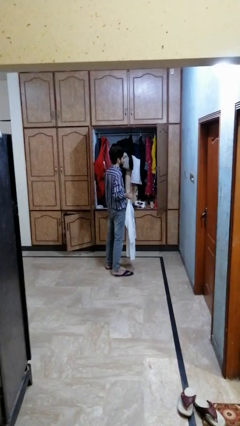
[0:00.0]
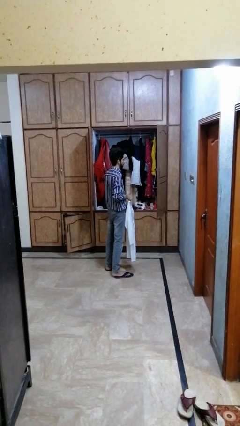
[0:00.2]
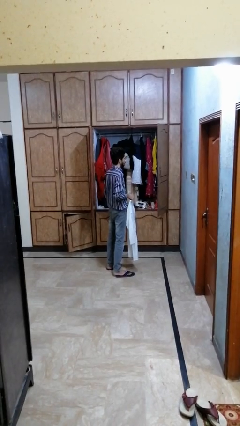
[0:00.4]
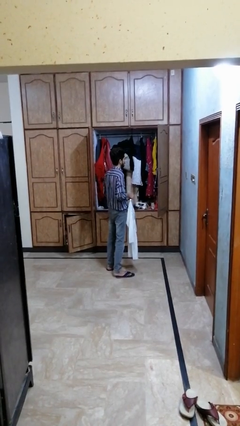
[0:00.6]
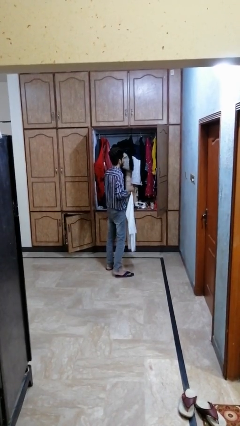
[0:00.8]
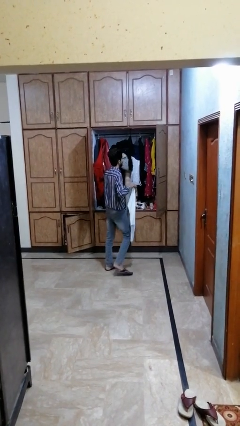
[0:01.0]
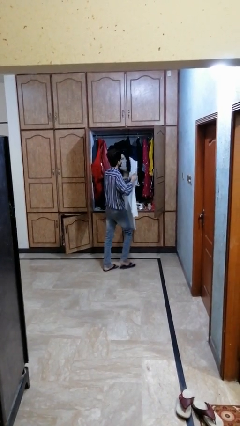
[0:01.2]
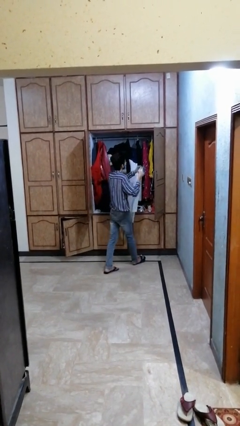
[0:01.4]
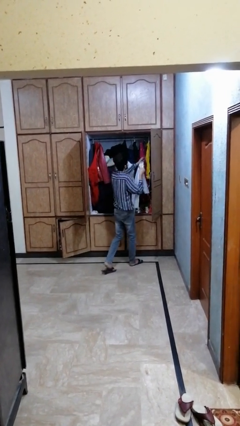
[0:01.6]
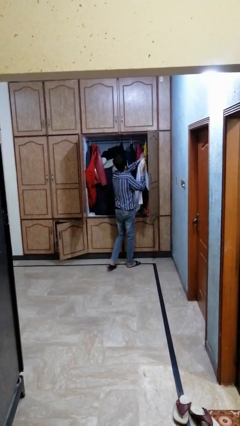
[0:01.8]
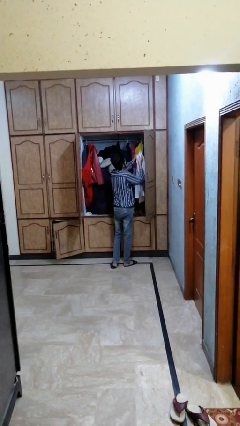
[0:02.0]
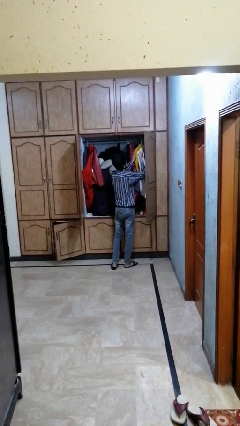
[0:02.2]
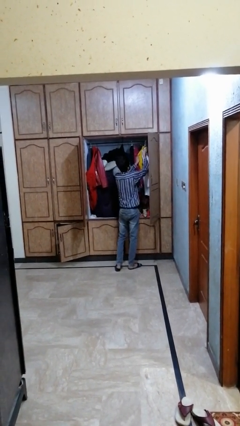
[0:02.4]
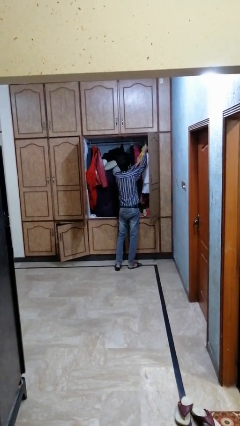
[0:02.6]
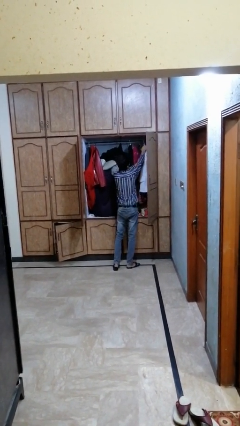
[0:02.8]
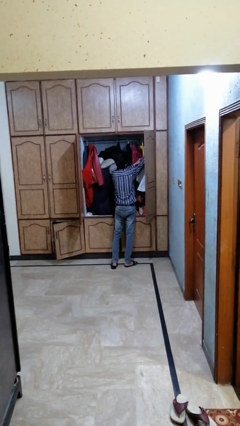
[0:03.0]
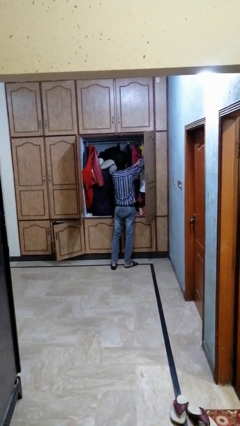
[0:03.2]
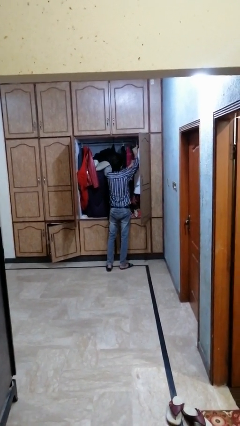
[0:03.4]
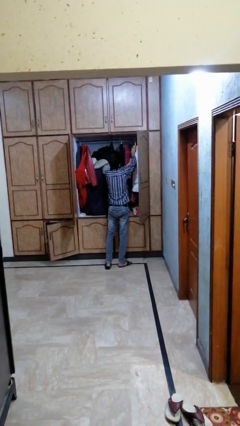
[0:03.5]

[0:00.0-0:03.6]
person puts clothes into dresser

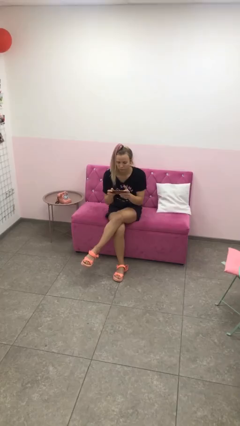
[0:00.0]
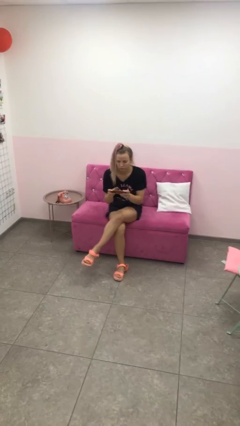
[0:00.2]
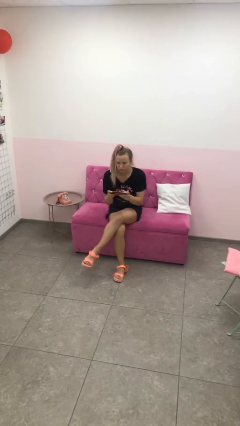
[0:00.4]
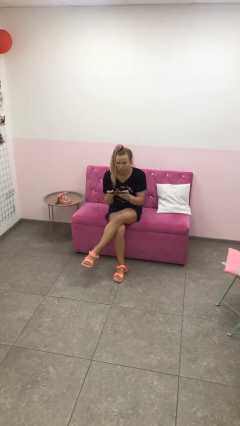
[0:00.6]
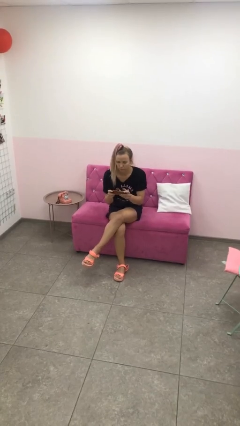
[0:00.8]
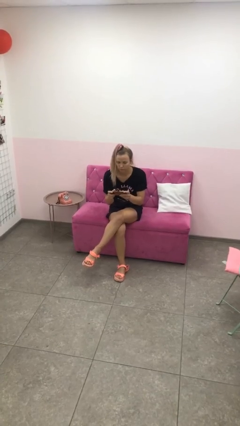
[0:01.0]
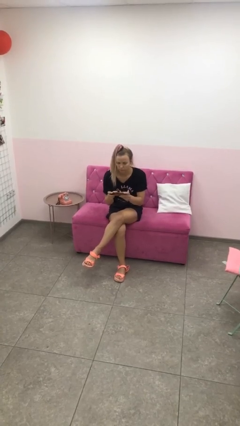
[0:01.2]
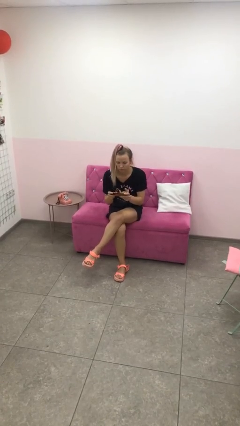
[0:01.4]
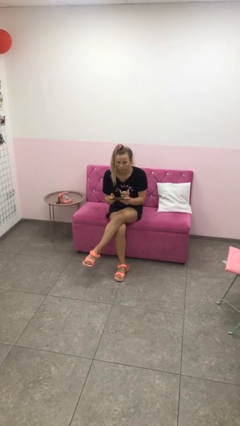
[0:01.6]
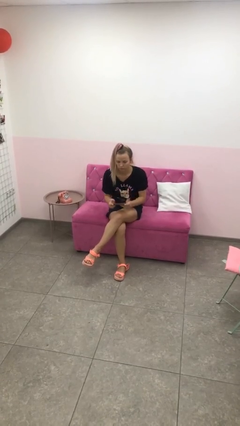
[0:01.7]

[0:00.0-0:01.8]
person interacts with handheld game

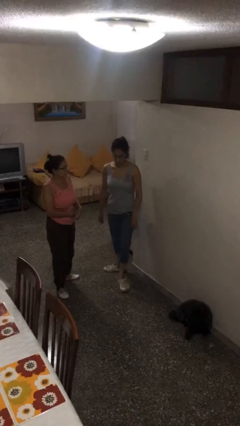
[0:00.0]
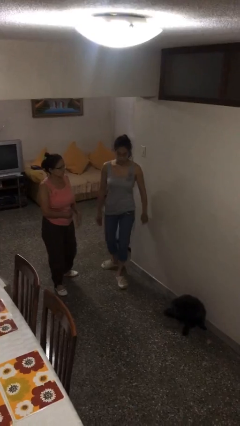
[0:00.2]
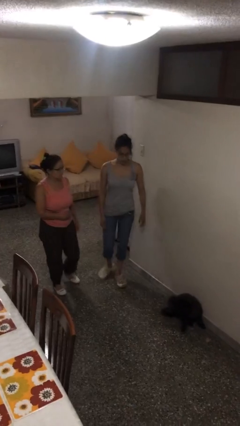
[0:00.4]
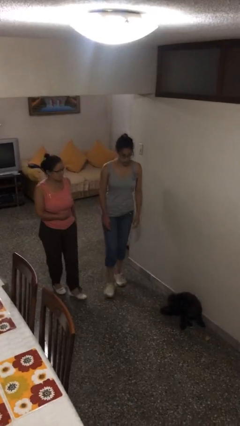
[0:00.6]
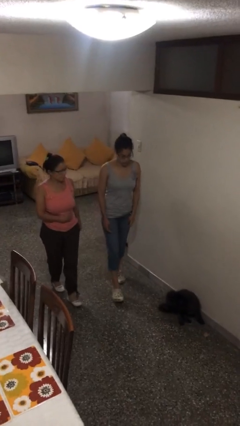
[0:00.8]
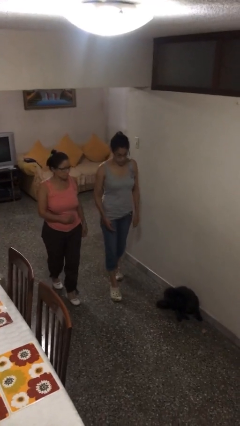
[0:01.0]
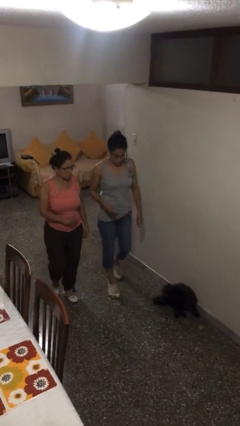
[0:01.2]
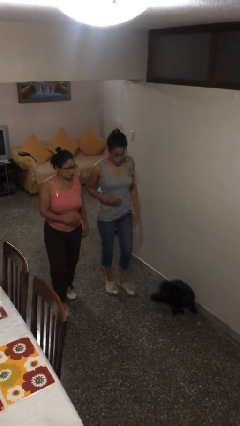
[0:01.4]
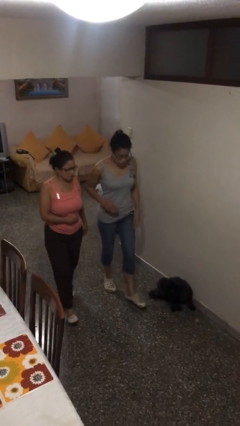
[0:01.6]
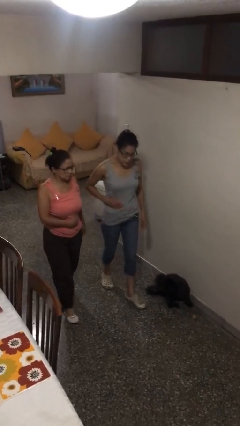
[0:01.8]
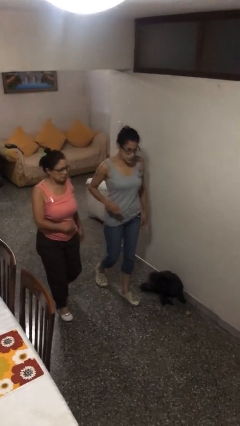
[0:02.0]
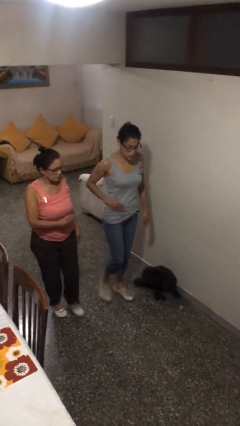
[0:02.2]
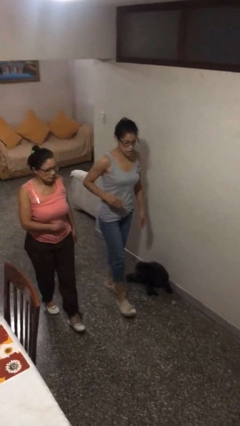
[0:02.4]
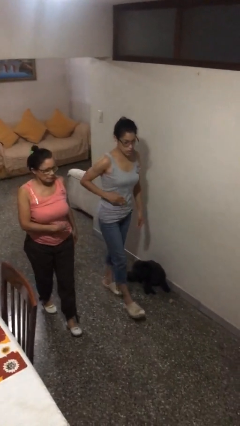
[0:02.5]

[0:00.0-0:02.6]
person talks to person

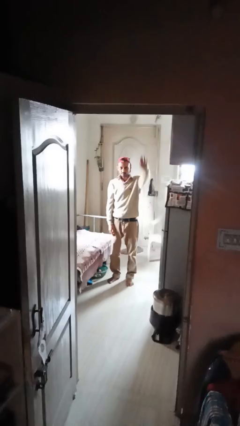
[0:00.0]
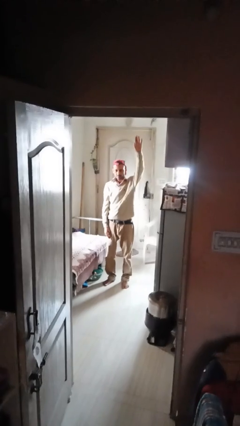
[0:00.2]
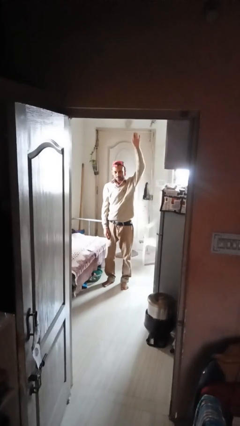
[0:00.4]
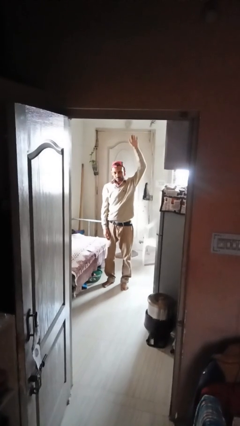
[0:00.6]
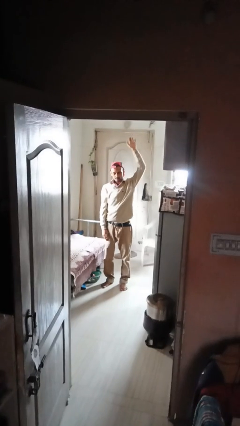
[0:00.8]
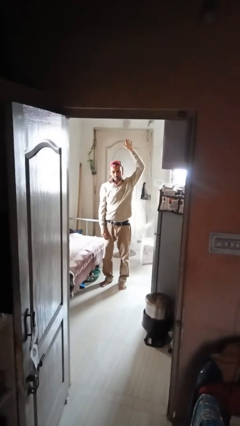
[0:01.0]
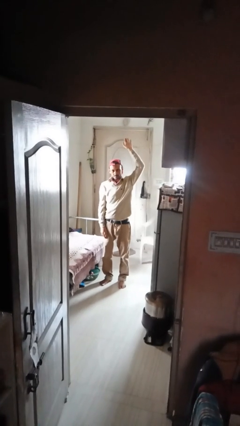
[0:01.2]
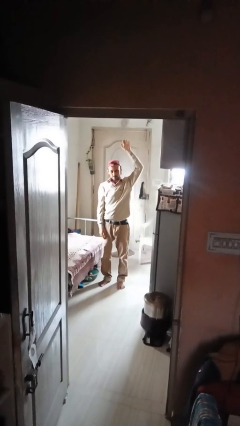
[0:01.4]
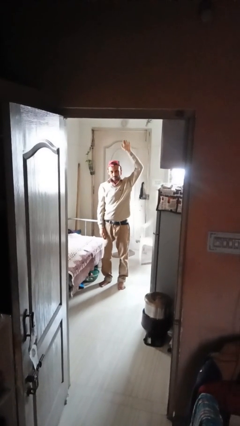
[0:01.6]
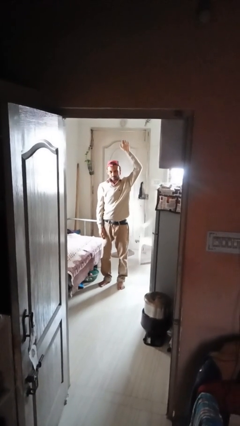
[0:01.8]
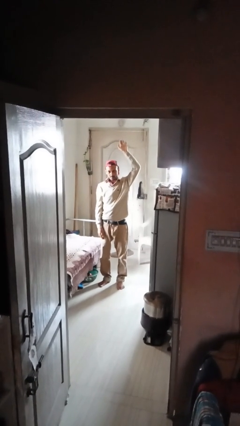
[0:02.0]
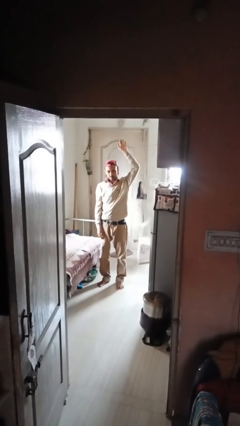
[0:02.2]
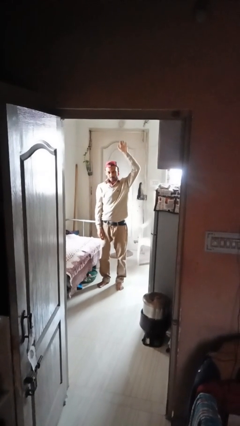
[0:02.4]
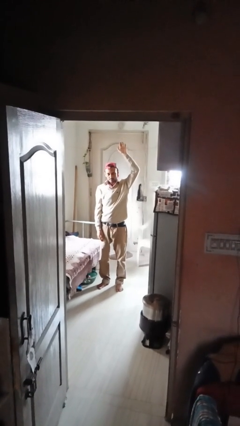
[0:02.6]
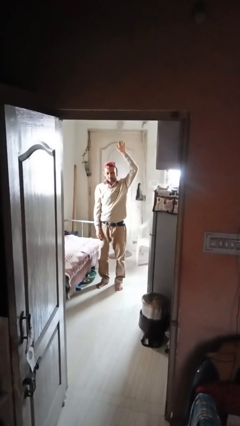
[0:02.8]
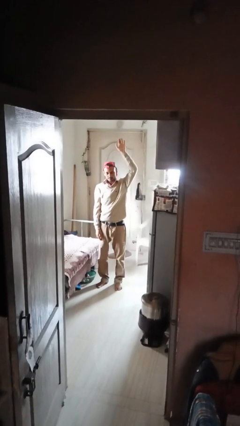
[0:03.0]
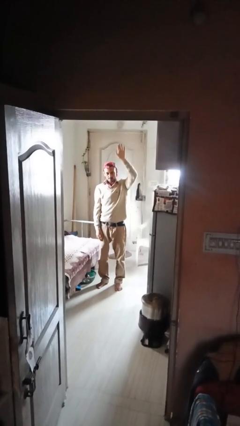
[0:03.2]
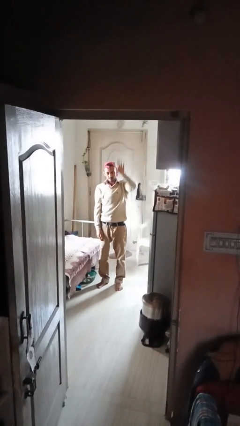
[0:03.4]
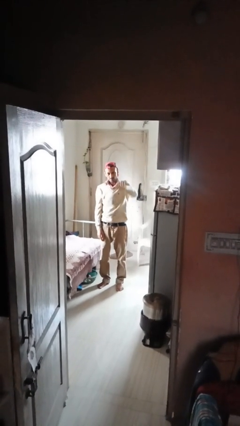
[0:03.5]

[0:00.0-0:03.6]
person gestures raise hand

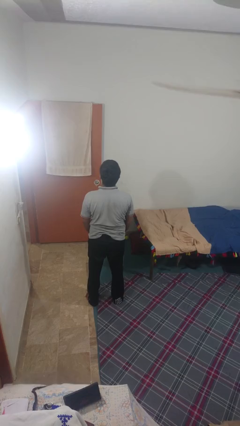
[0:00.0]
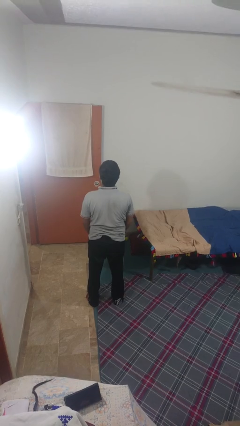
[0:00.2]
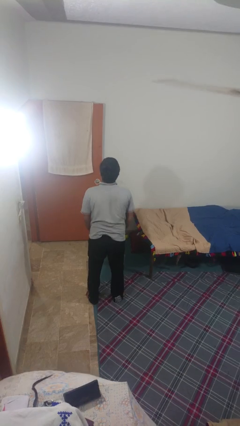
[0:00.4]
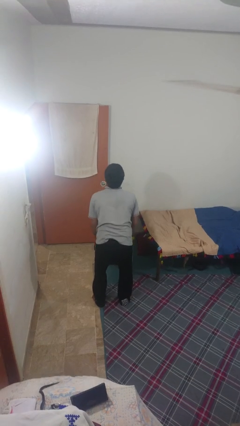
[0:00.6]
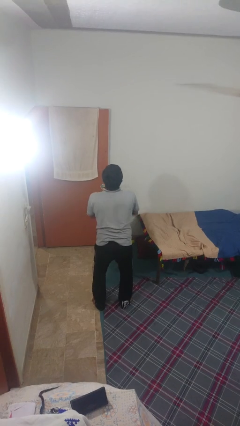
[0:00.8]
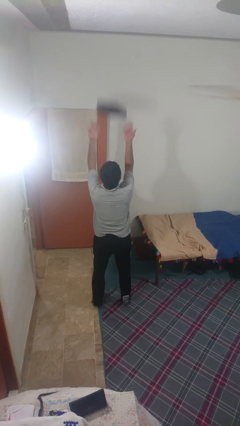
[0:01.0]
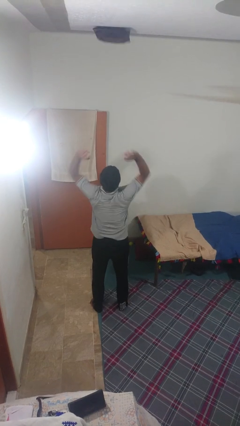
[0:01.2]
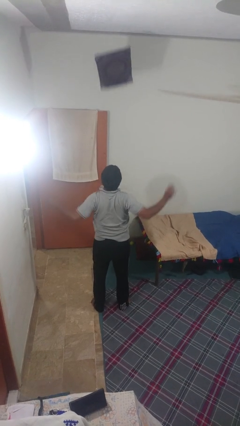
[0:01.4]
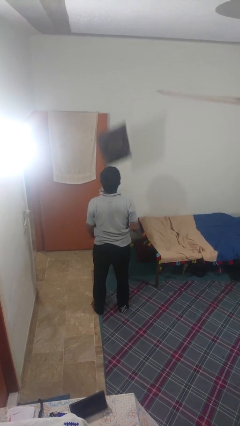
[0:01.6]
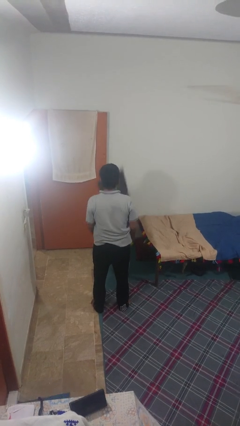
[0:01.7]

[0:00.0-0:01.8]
person throws object into air

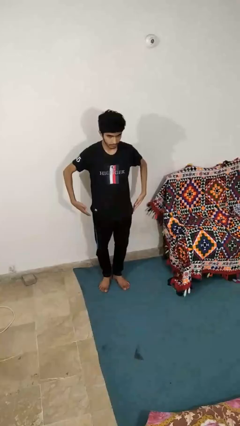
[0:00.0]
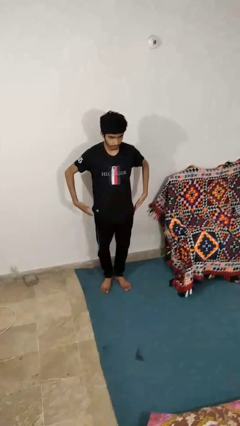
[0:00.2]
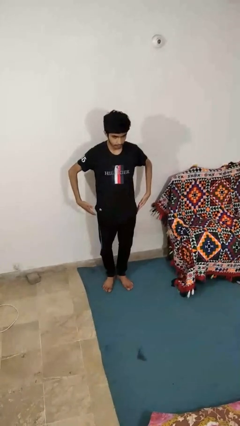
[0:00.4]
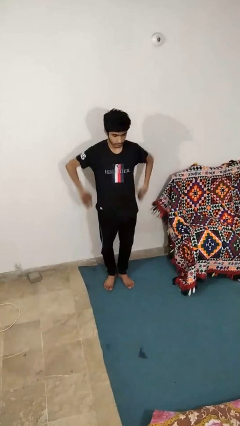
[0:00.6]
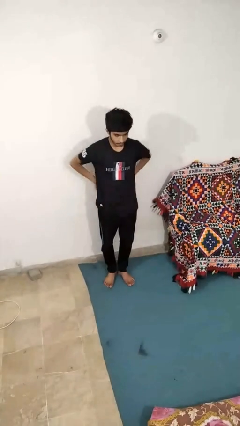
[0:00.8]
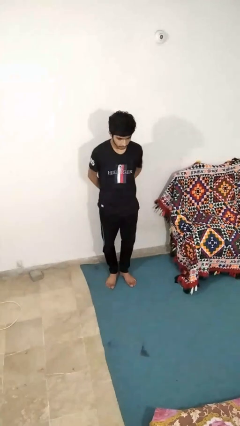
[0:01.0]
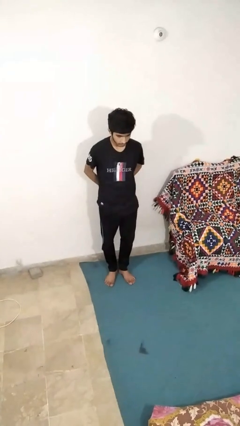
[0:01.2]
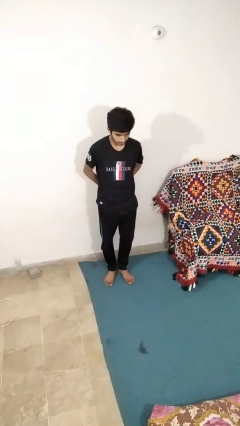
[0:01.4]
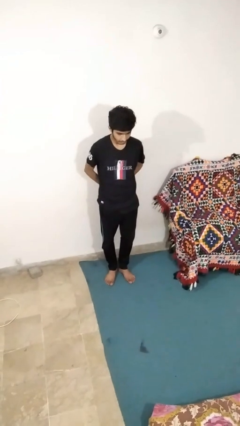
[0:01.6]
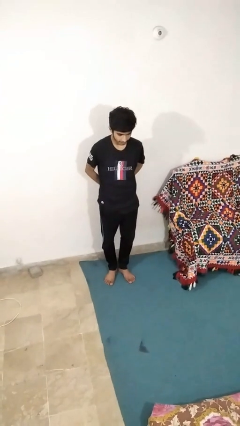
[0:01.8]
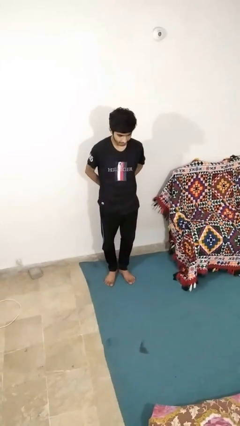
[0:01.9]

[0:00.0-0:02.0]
person puts hands in back pockets

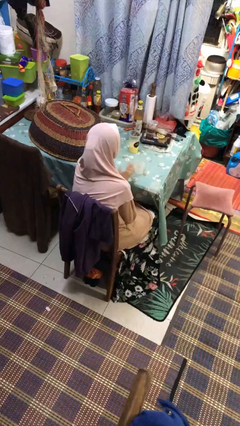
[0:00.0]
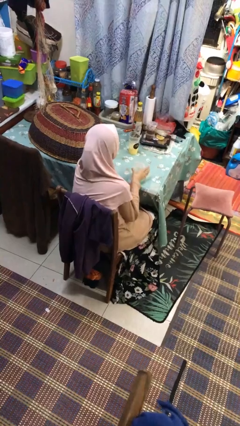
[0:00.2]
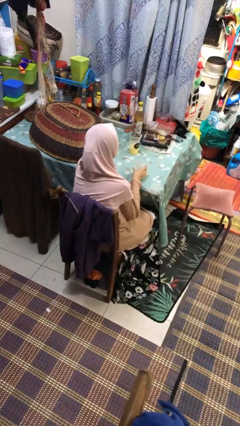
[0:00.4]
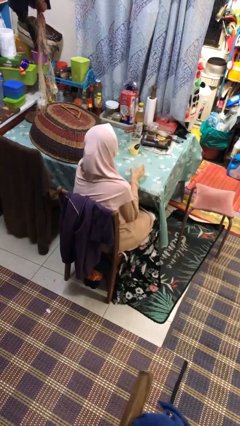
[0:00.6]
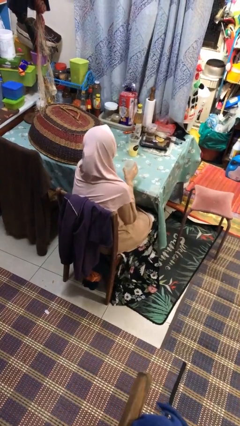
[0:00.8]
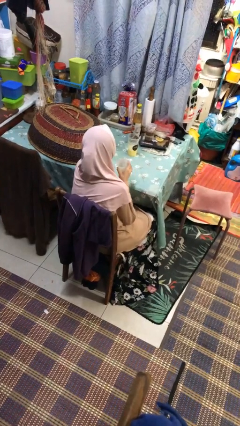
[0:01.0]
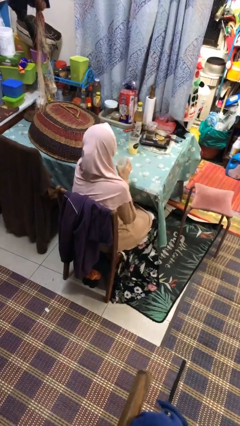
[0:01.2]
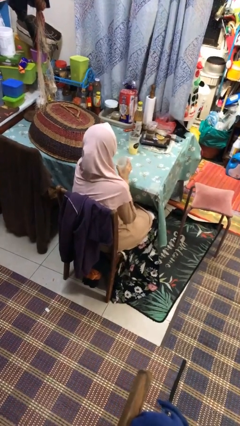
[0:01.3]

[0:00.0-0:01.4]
person picks up object from table
